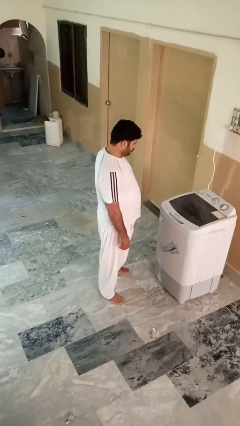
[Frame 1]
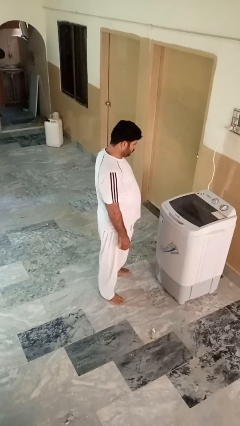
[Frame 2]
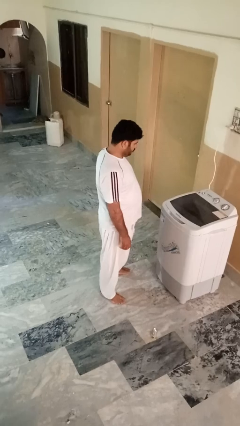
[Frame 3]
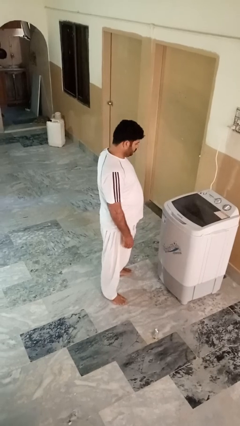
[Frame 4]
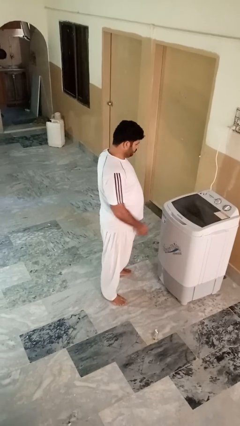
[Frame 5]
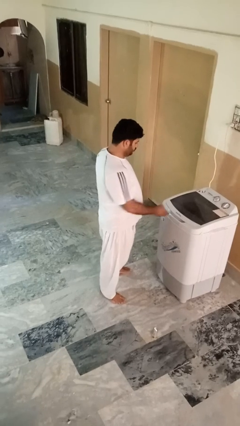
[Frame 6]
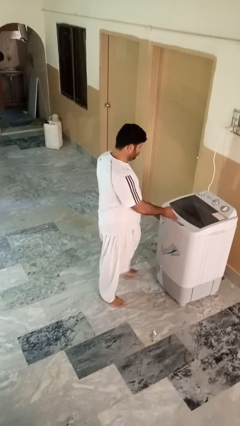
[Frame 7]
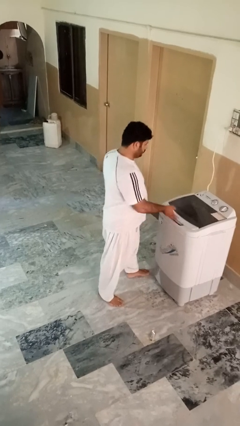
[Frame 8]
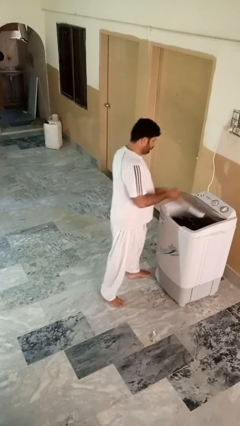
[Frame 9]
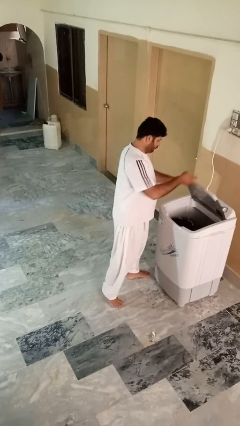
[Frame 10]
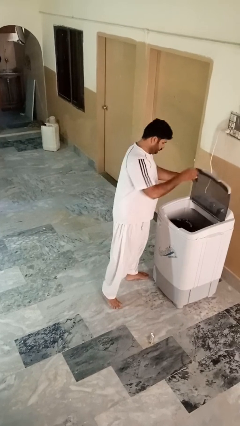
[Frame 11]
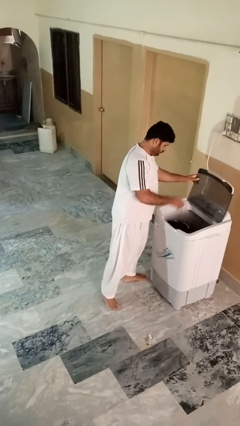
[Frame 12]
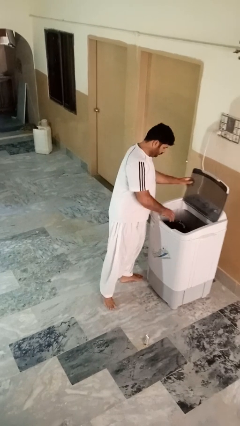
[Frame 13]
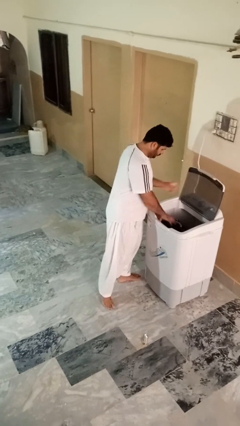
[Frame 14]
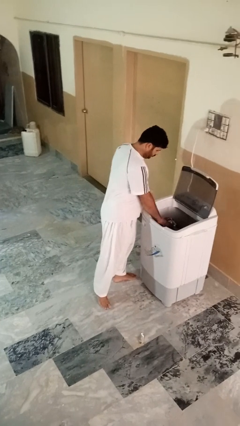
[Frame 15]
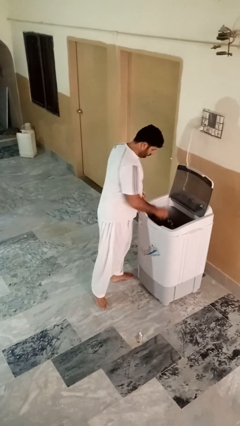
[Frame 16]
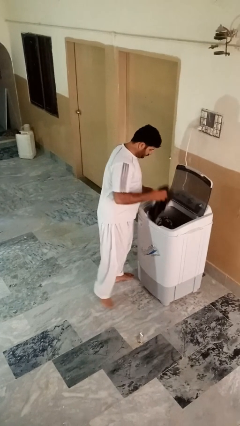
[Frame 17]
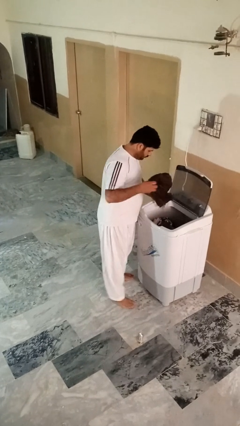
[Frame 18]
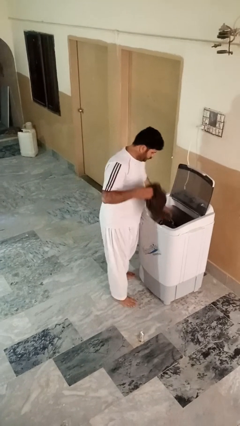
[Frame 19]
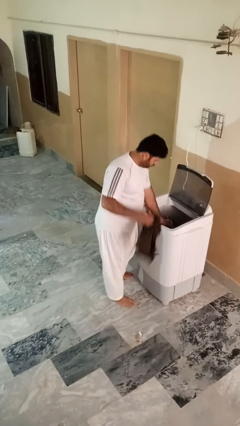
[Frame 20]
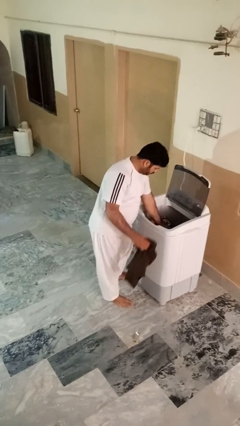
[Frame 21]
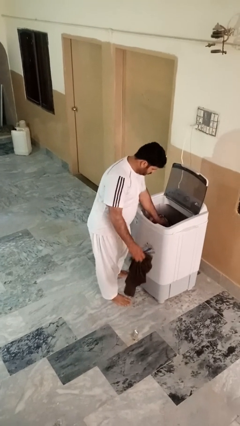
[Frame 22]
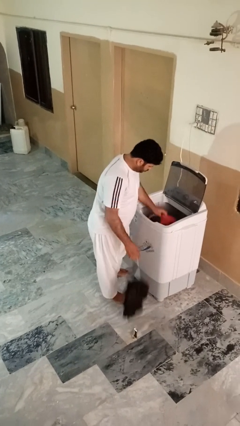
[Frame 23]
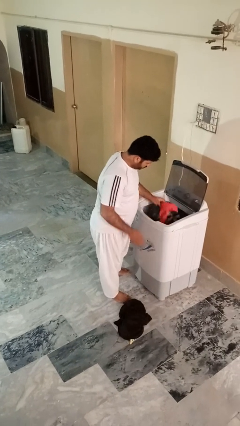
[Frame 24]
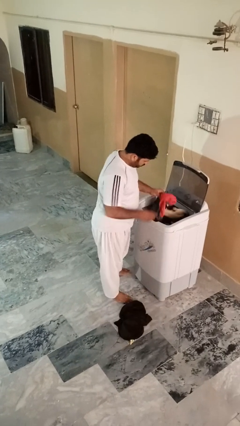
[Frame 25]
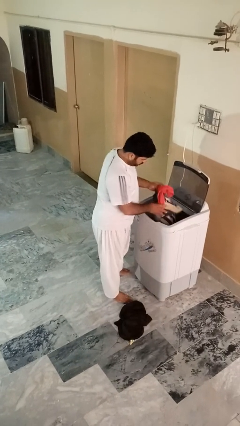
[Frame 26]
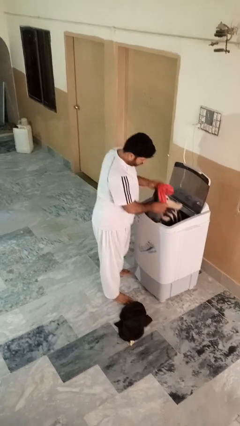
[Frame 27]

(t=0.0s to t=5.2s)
person unloads clotheswasher

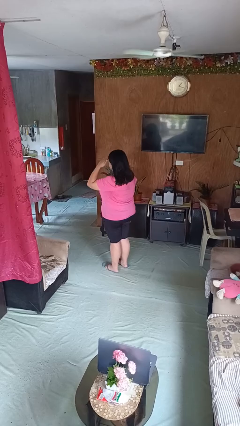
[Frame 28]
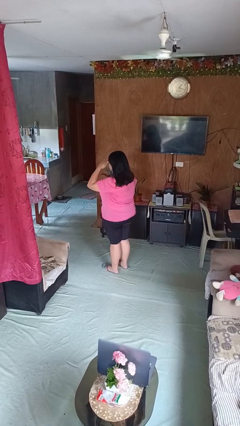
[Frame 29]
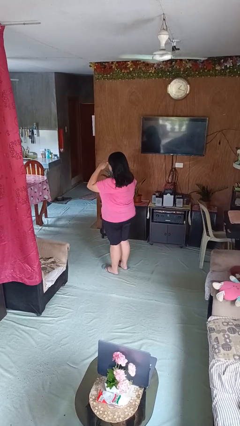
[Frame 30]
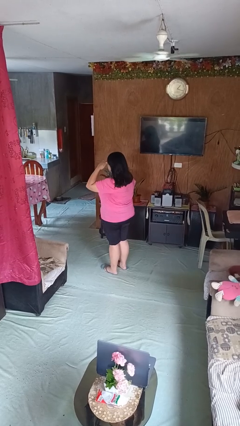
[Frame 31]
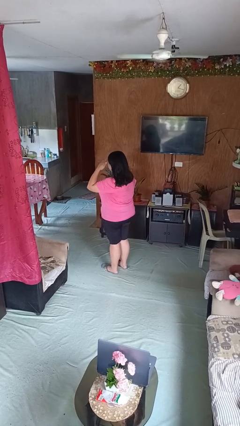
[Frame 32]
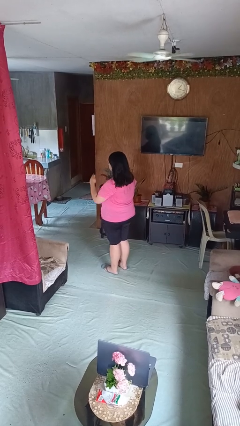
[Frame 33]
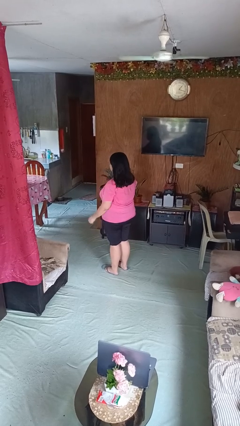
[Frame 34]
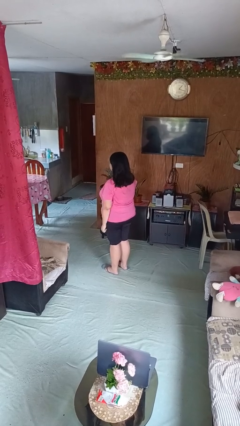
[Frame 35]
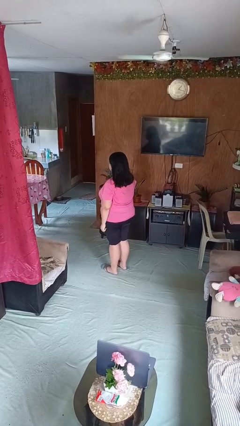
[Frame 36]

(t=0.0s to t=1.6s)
person salutes

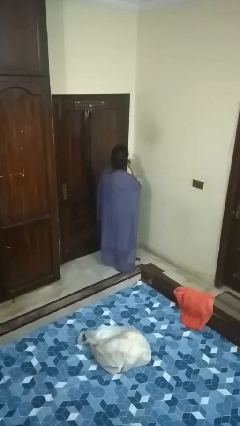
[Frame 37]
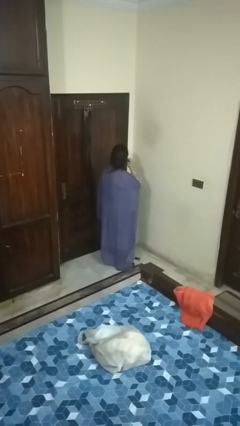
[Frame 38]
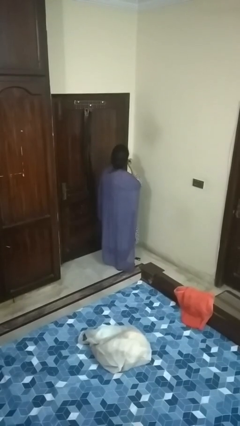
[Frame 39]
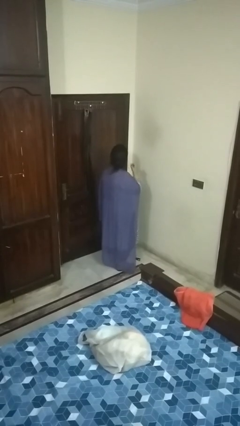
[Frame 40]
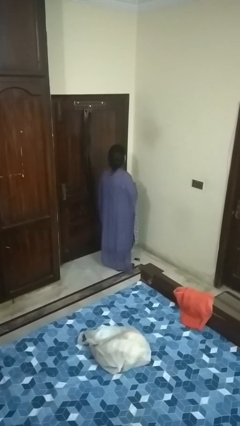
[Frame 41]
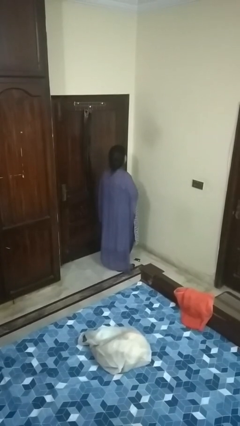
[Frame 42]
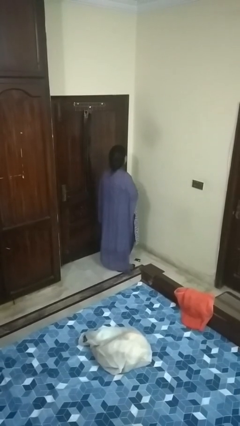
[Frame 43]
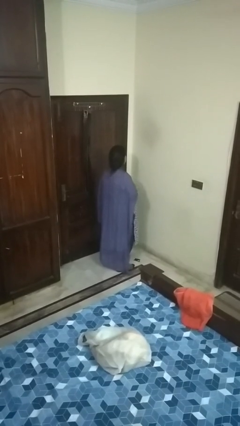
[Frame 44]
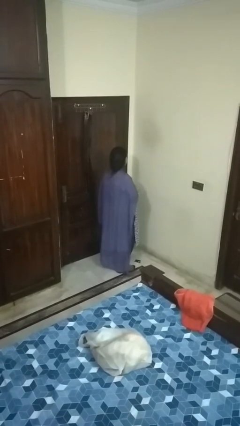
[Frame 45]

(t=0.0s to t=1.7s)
person takes off earrings

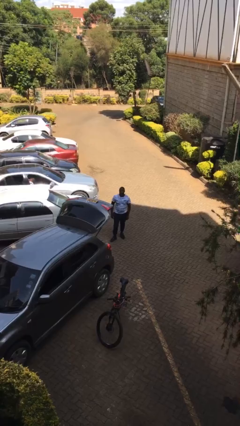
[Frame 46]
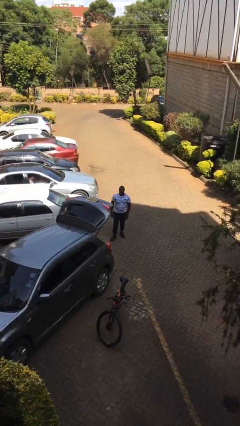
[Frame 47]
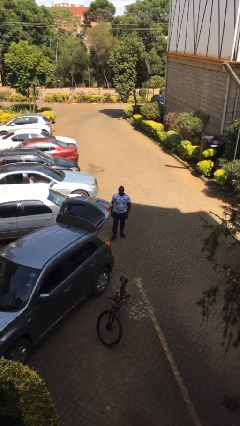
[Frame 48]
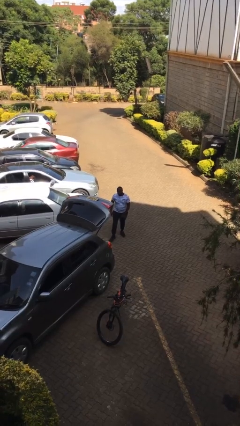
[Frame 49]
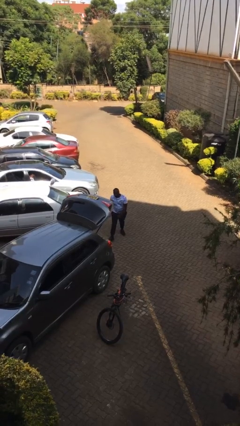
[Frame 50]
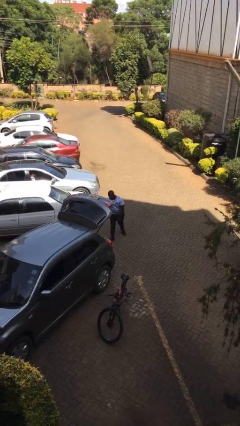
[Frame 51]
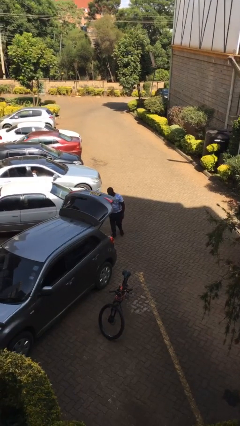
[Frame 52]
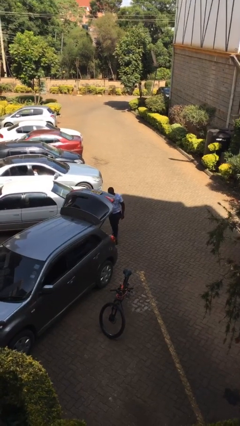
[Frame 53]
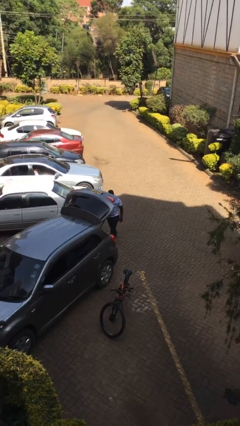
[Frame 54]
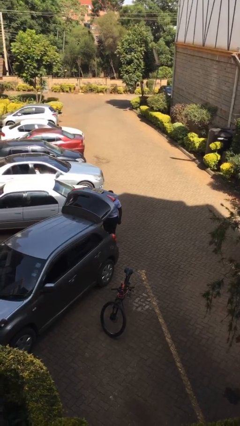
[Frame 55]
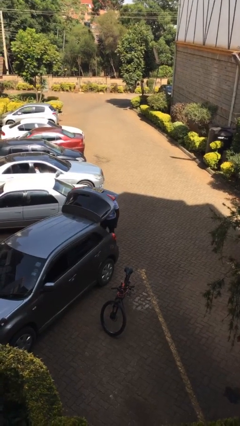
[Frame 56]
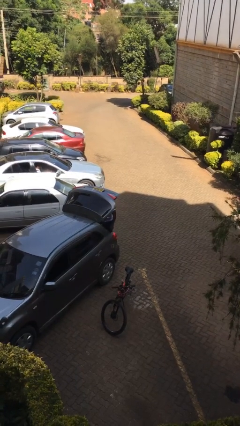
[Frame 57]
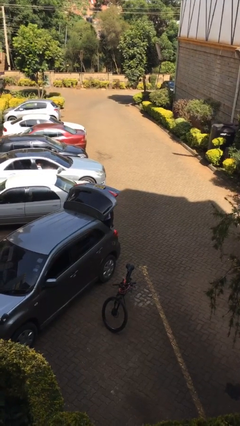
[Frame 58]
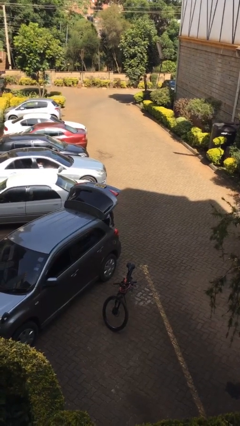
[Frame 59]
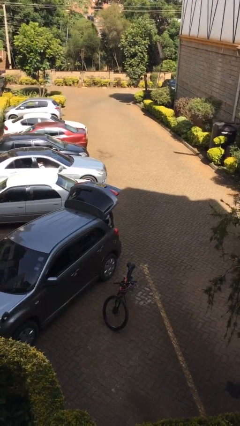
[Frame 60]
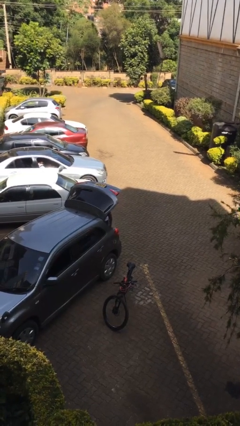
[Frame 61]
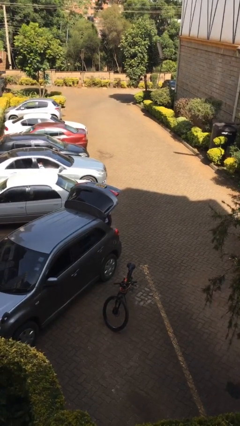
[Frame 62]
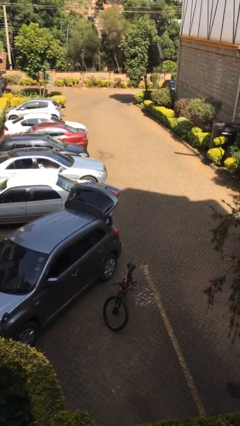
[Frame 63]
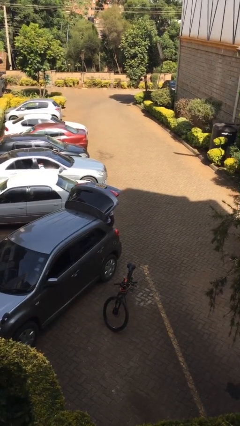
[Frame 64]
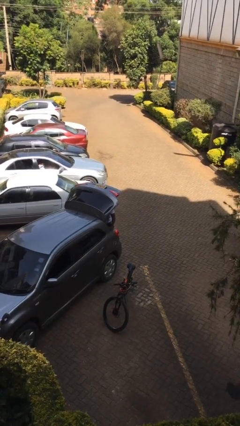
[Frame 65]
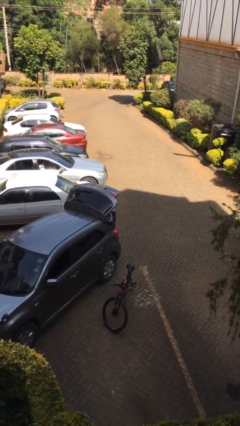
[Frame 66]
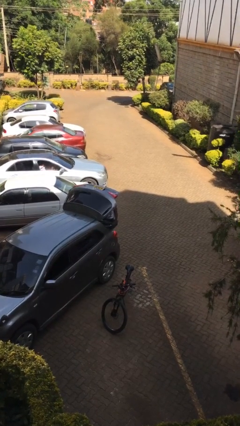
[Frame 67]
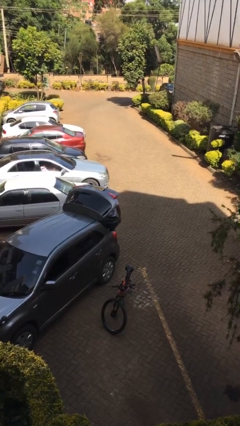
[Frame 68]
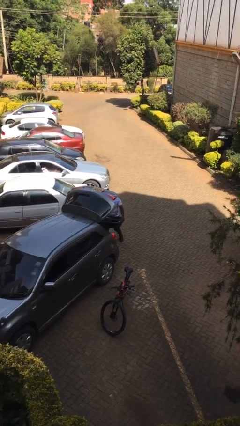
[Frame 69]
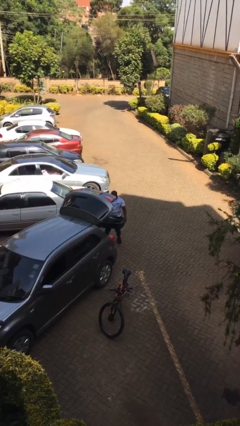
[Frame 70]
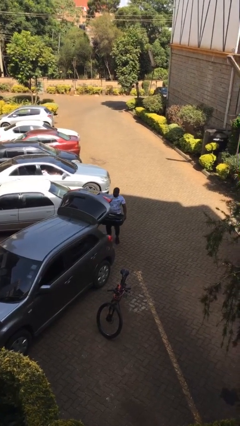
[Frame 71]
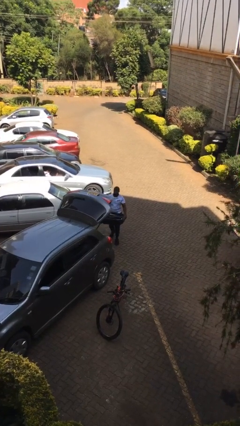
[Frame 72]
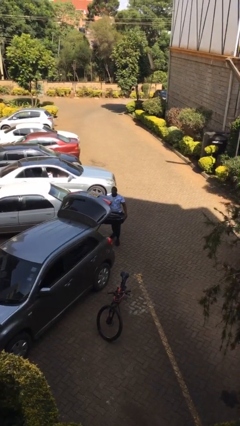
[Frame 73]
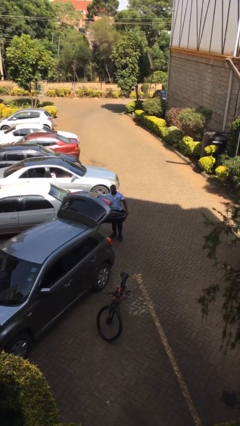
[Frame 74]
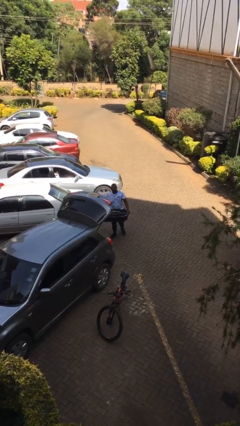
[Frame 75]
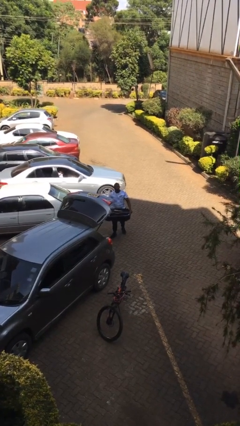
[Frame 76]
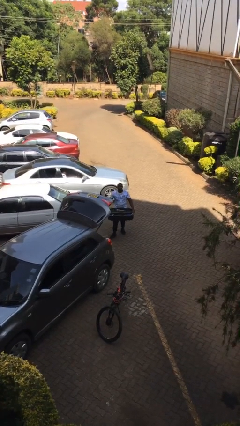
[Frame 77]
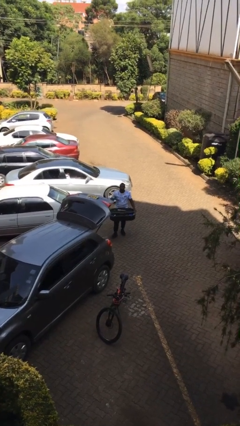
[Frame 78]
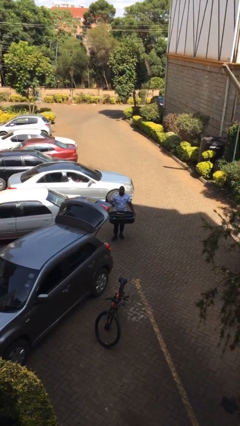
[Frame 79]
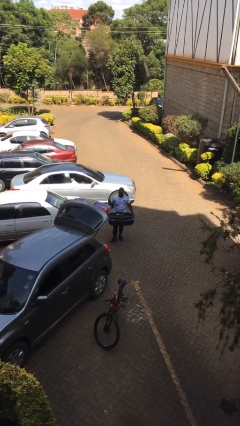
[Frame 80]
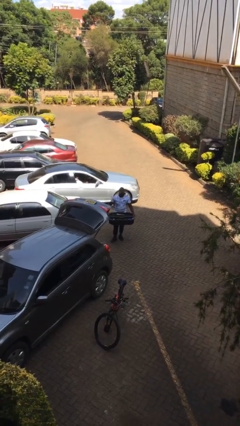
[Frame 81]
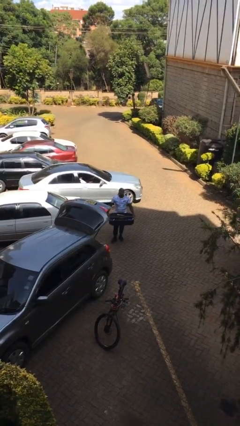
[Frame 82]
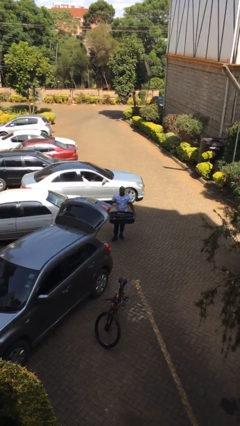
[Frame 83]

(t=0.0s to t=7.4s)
person unloads car

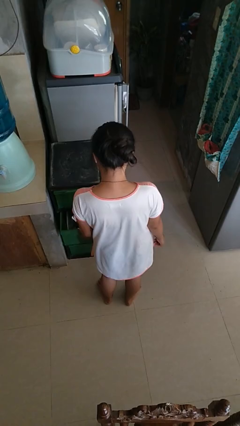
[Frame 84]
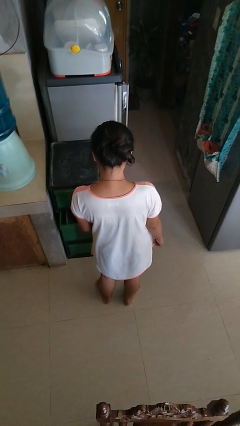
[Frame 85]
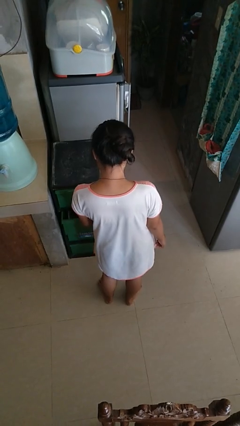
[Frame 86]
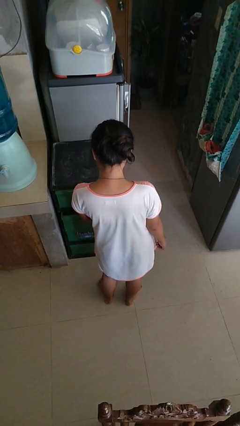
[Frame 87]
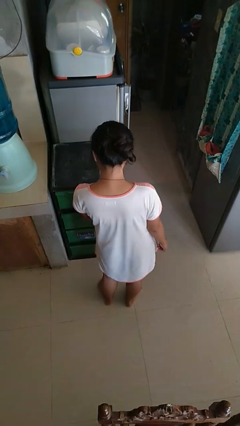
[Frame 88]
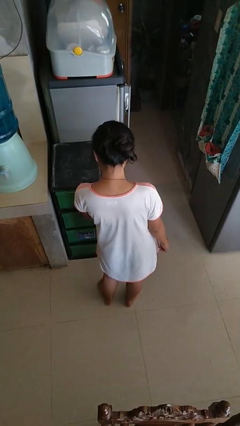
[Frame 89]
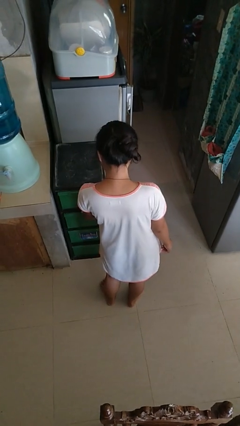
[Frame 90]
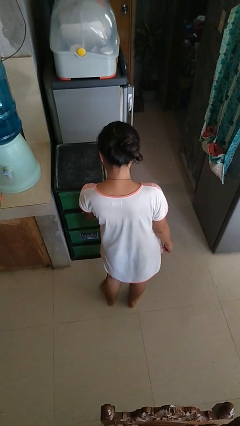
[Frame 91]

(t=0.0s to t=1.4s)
person closes kitchen drawer

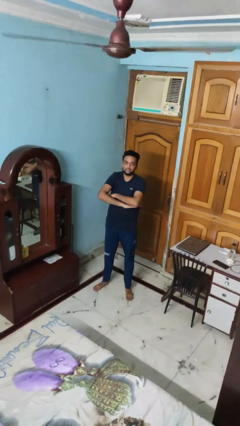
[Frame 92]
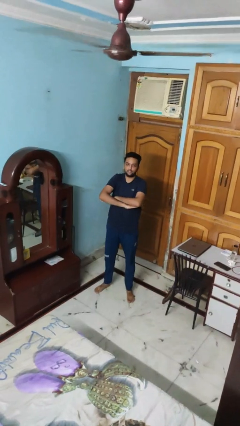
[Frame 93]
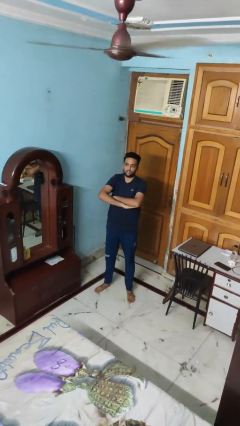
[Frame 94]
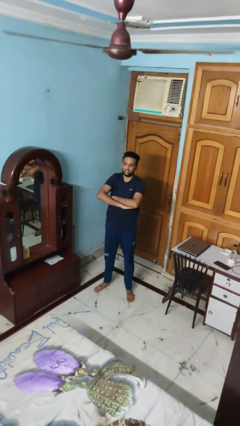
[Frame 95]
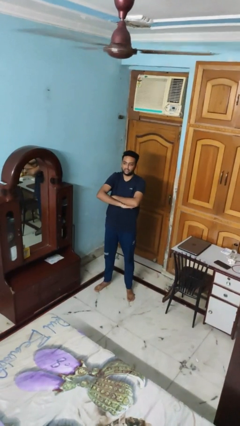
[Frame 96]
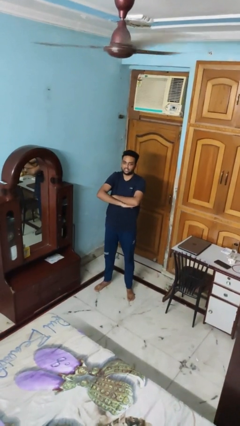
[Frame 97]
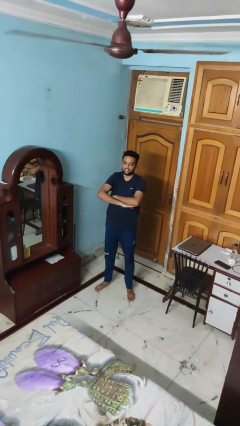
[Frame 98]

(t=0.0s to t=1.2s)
person stands up
